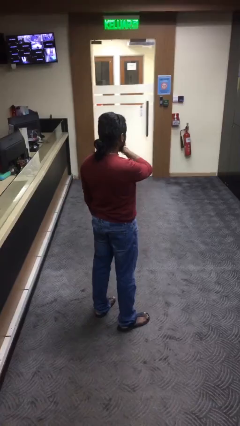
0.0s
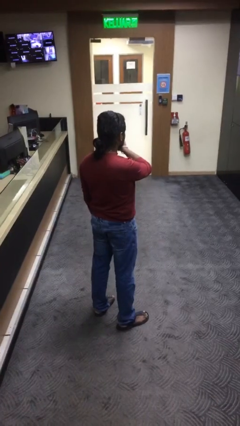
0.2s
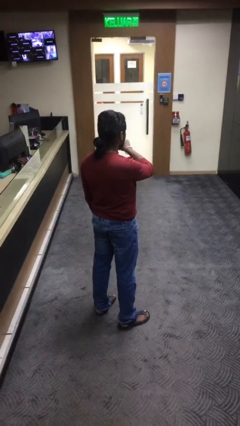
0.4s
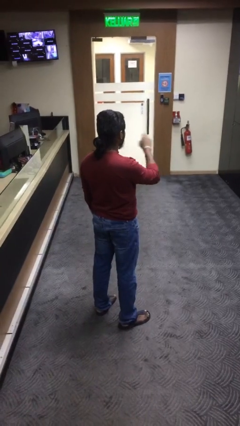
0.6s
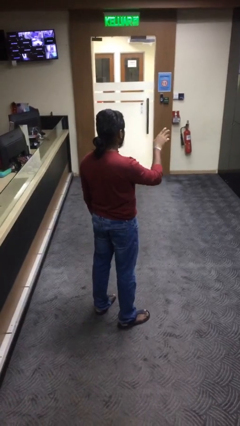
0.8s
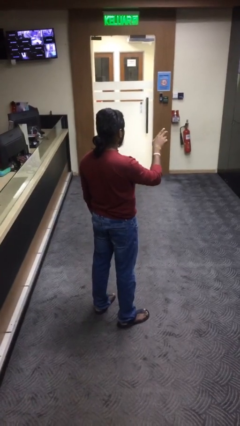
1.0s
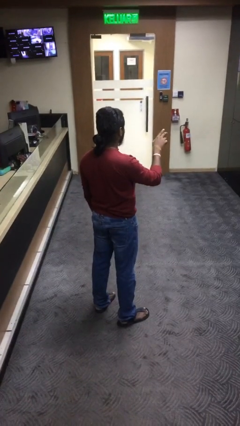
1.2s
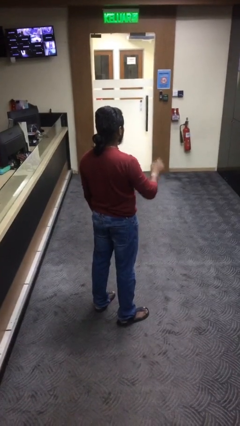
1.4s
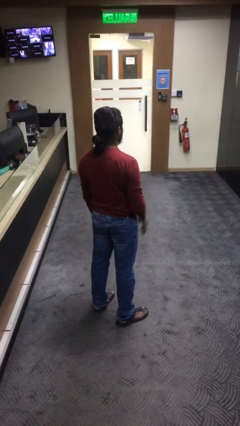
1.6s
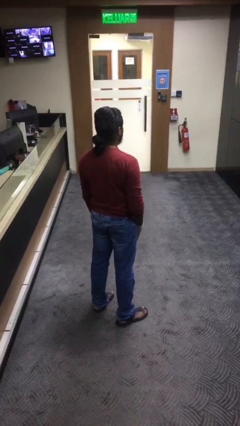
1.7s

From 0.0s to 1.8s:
person gestures swipe right

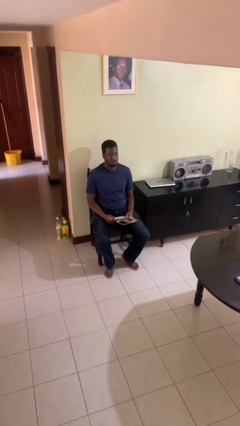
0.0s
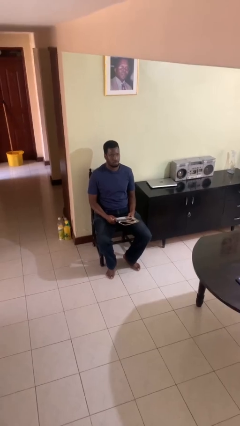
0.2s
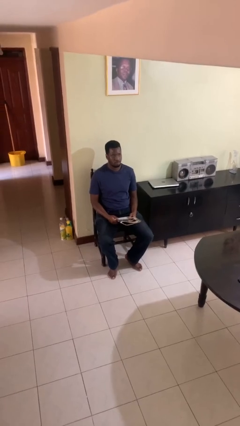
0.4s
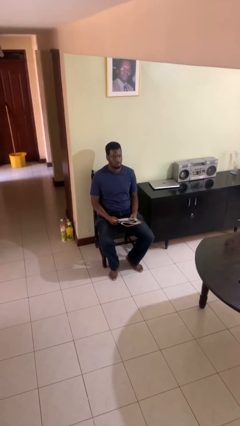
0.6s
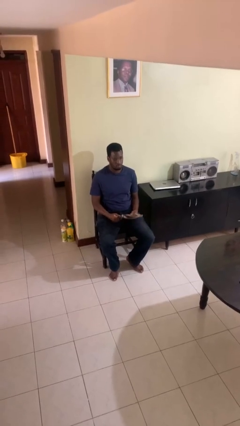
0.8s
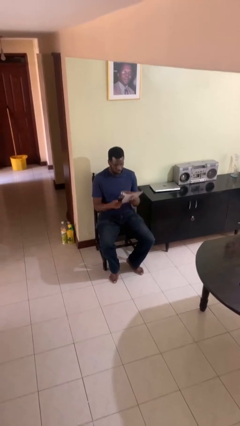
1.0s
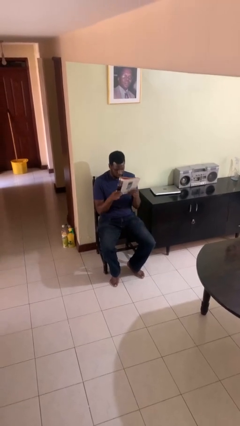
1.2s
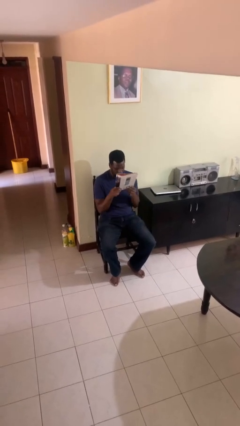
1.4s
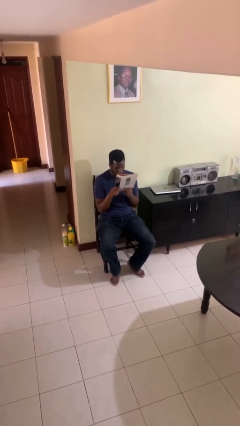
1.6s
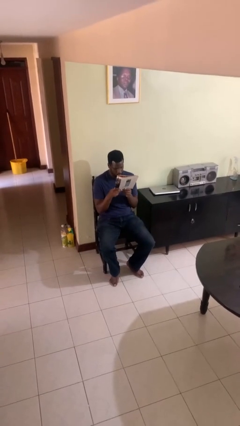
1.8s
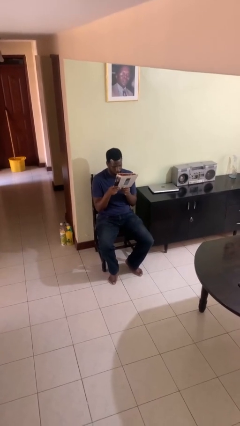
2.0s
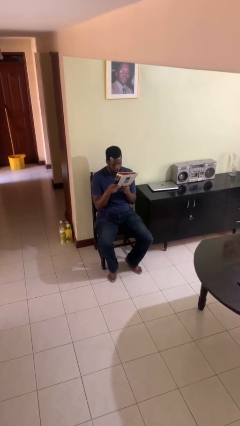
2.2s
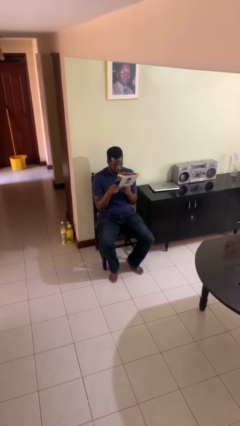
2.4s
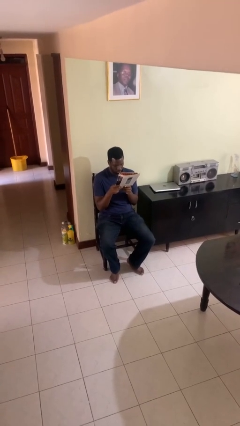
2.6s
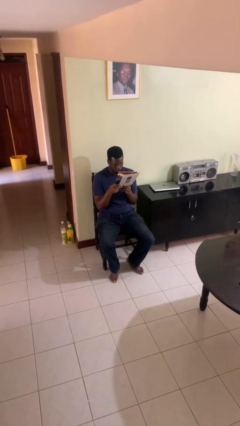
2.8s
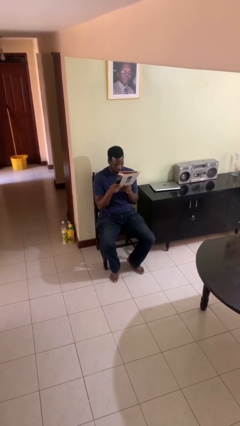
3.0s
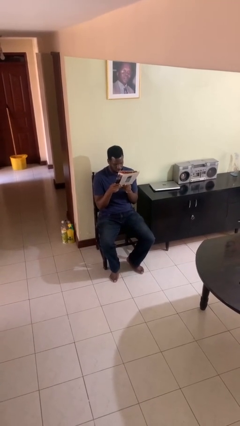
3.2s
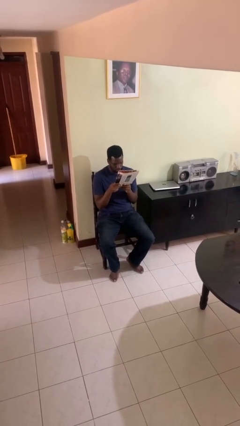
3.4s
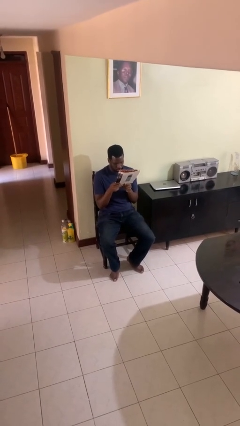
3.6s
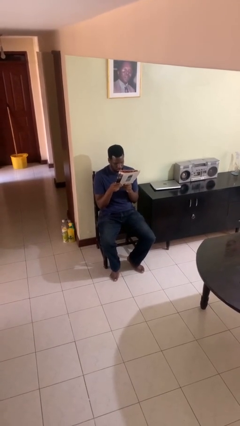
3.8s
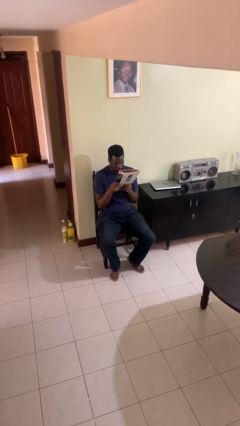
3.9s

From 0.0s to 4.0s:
person reads document

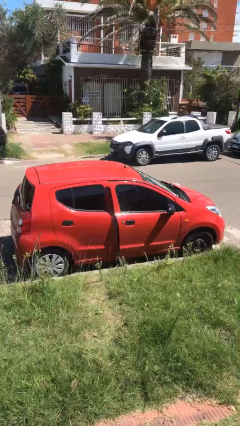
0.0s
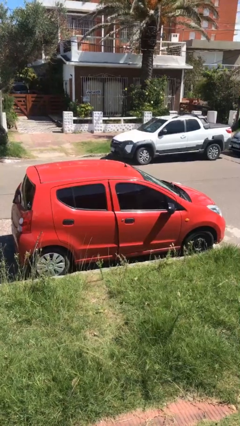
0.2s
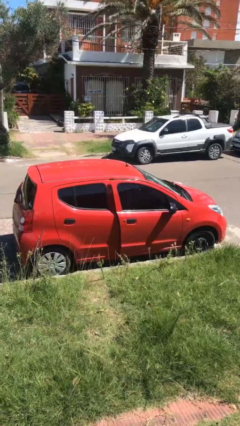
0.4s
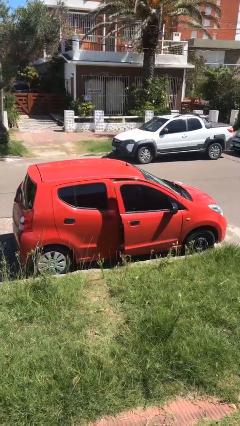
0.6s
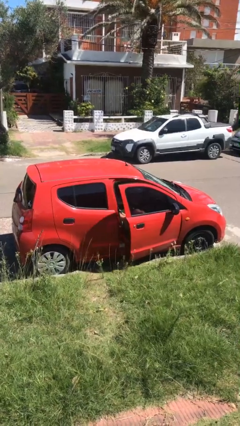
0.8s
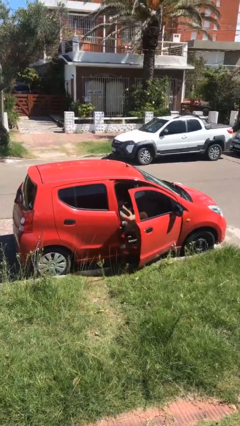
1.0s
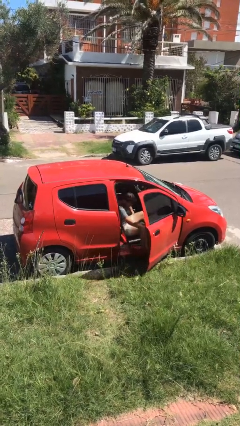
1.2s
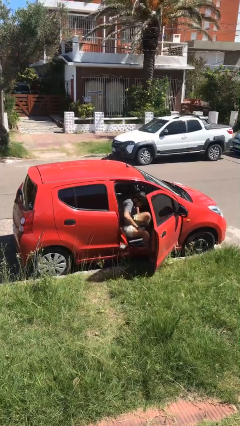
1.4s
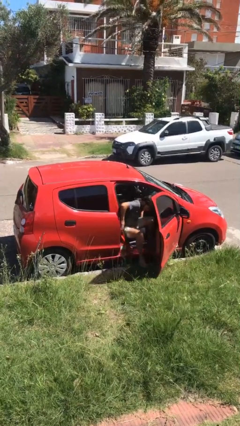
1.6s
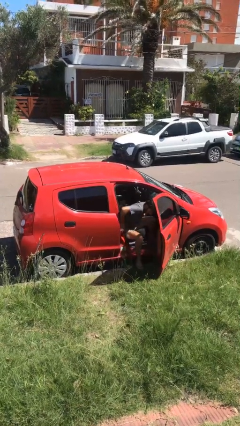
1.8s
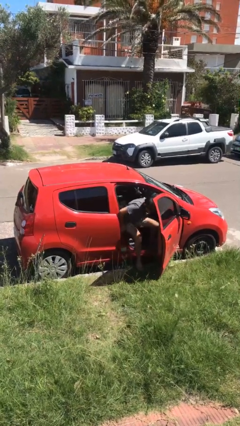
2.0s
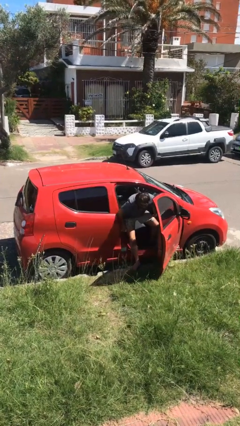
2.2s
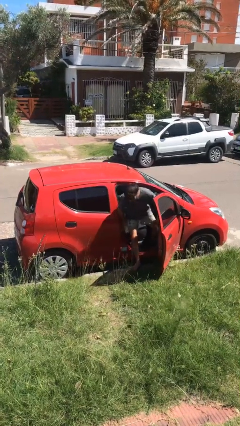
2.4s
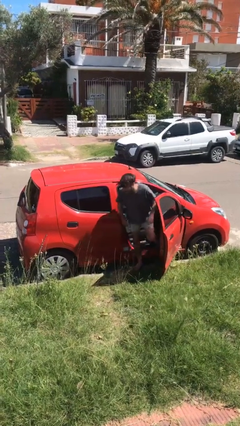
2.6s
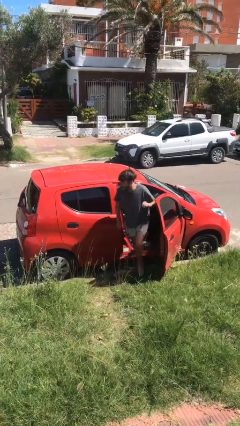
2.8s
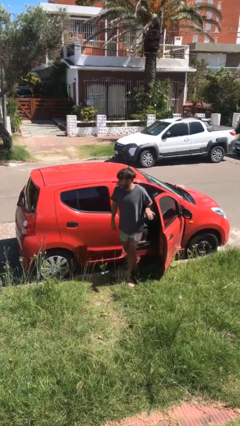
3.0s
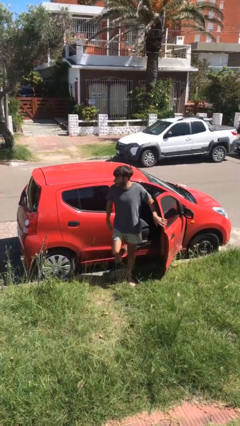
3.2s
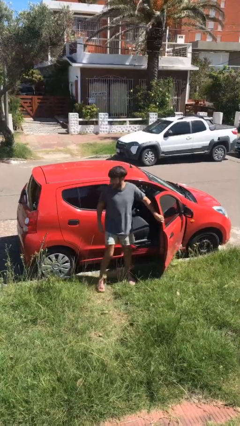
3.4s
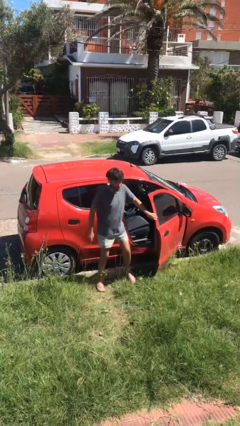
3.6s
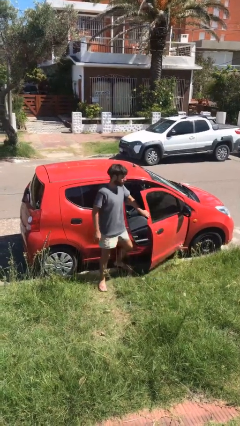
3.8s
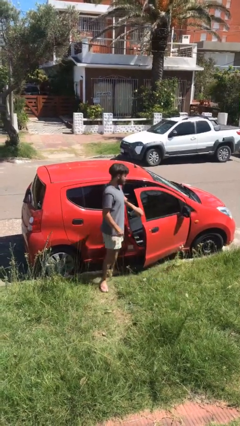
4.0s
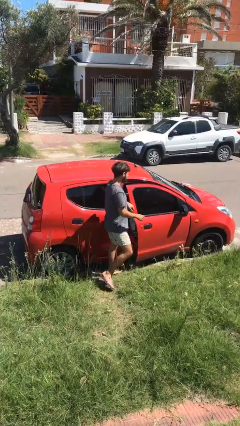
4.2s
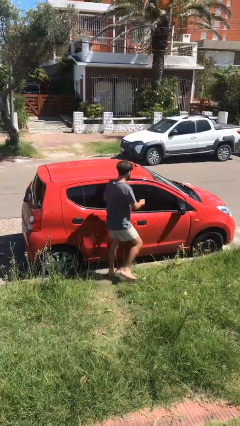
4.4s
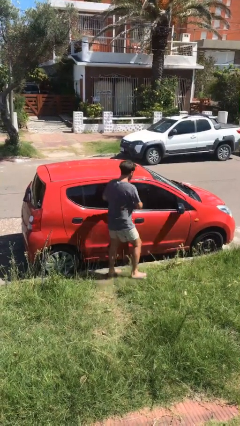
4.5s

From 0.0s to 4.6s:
car drops off person

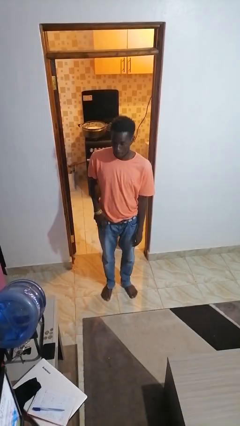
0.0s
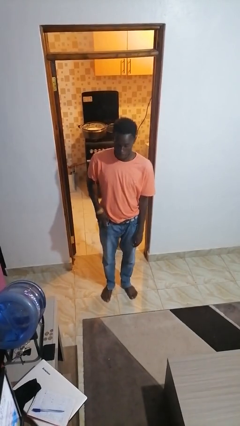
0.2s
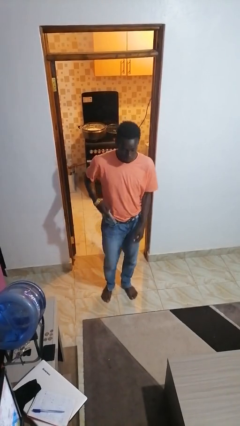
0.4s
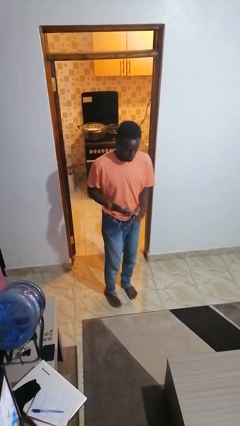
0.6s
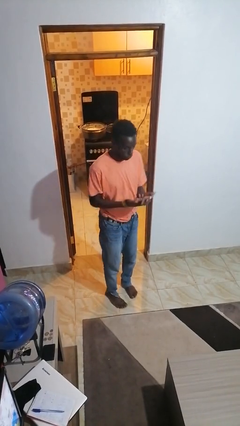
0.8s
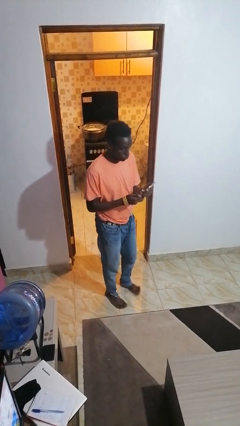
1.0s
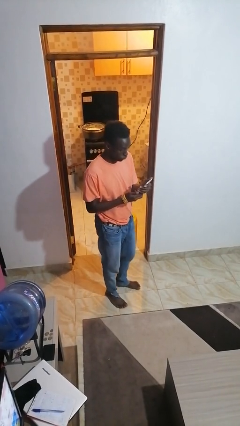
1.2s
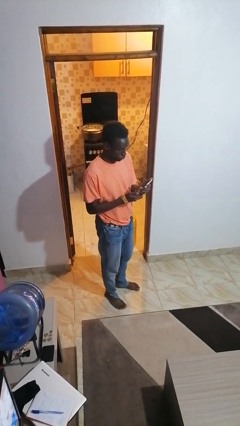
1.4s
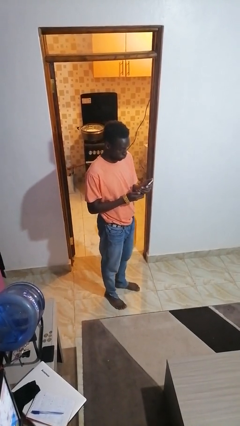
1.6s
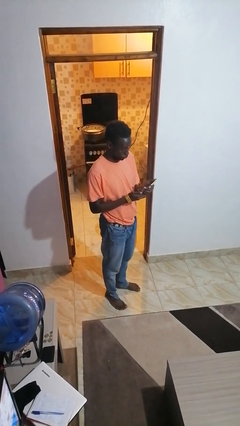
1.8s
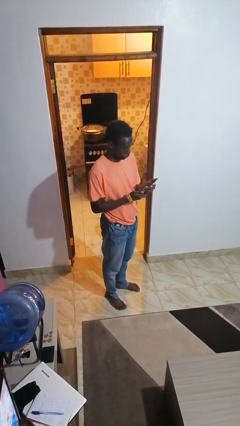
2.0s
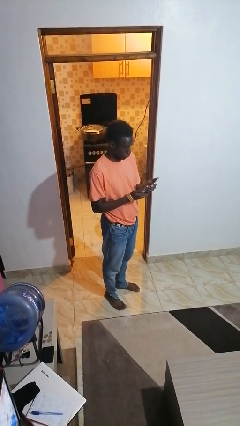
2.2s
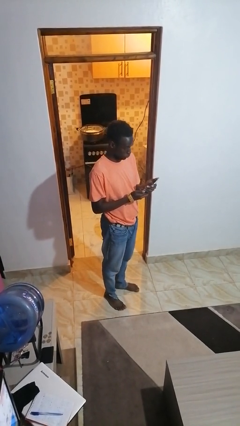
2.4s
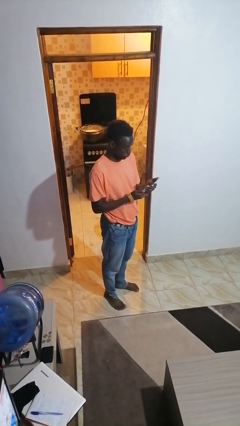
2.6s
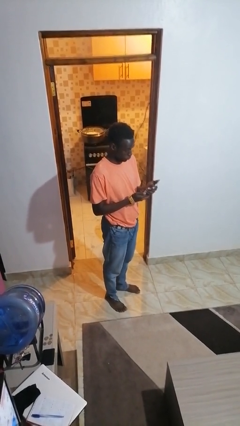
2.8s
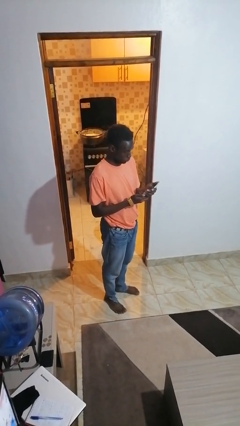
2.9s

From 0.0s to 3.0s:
person takes phone from pocket

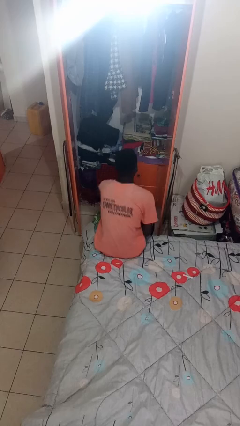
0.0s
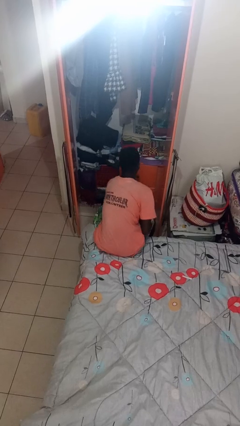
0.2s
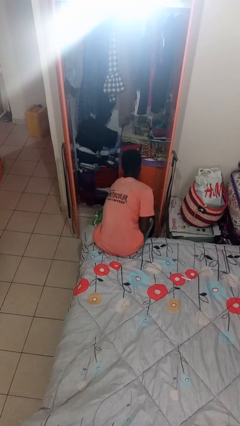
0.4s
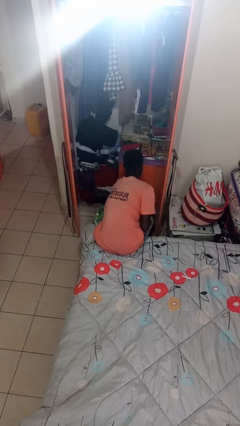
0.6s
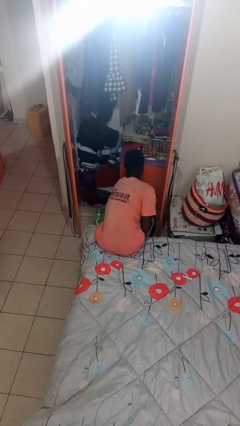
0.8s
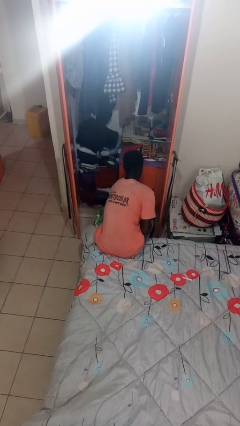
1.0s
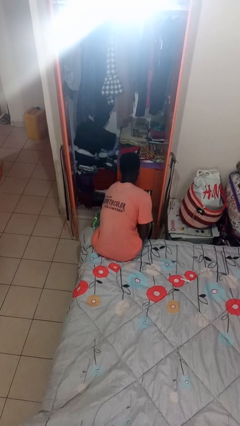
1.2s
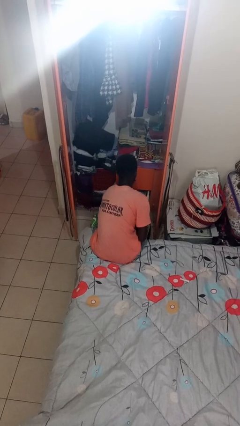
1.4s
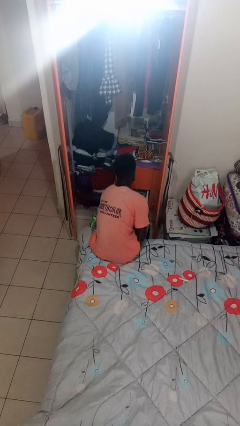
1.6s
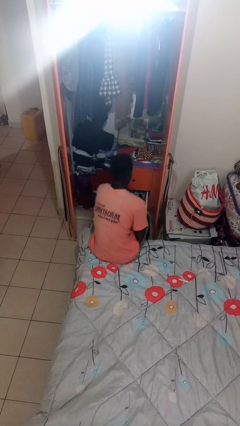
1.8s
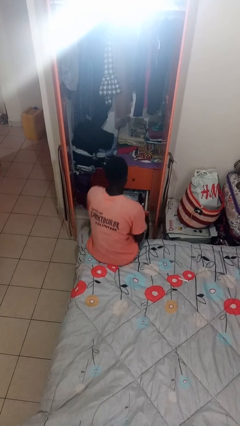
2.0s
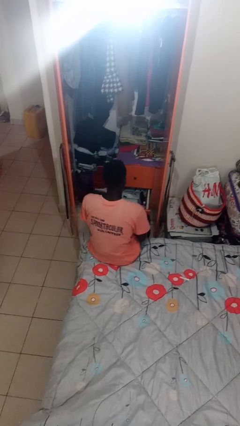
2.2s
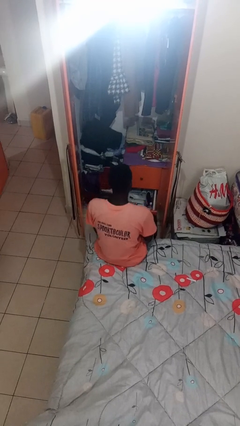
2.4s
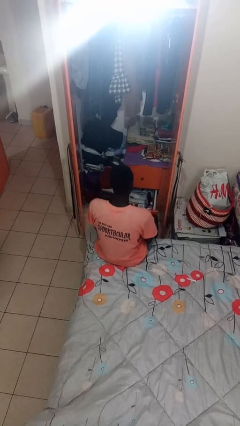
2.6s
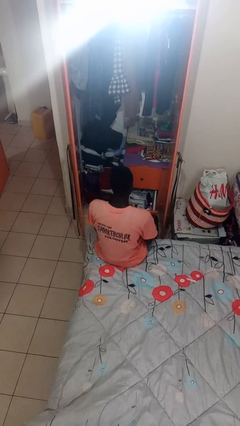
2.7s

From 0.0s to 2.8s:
person opens dresser drawer

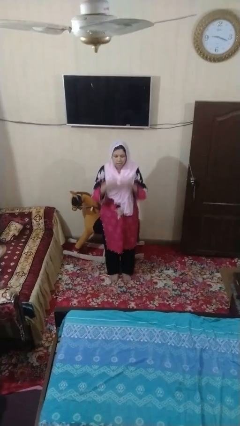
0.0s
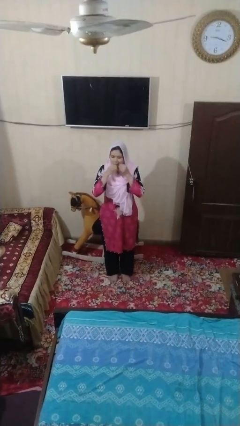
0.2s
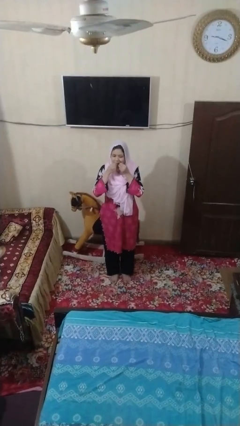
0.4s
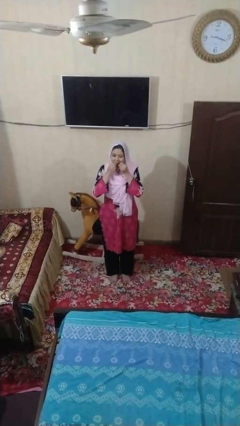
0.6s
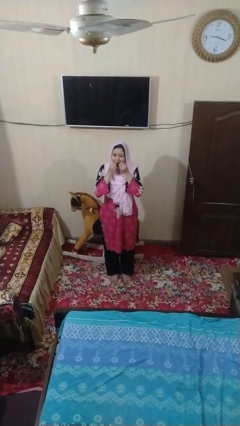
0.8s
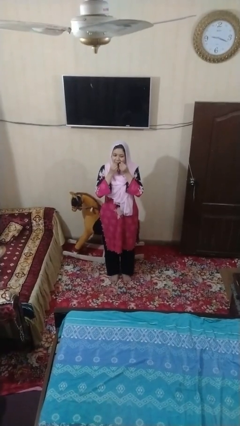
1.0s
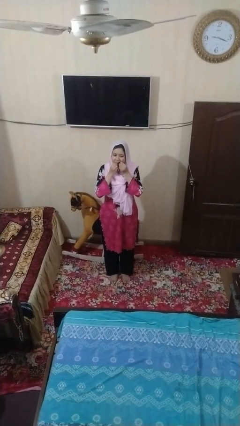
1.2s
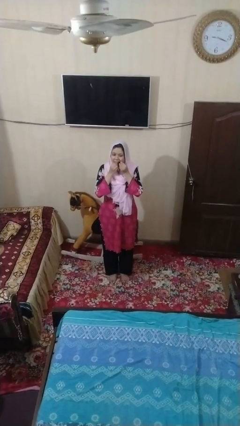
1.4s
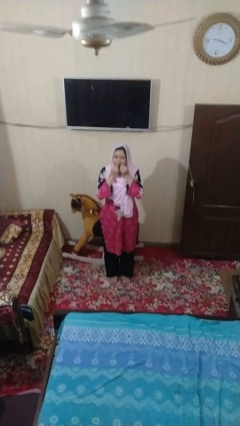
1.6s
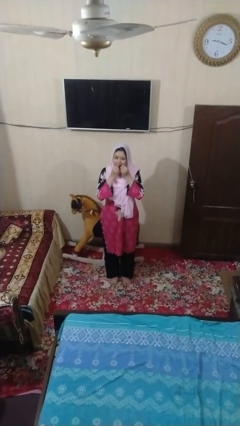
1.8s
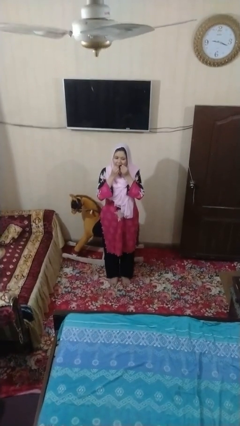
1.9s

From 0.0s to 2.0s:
person flosses
